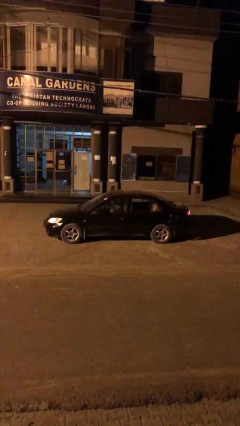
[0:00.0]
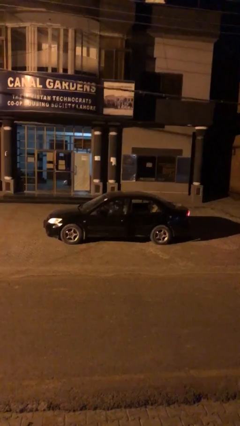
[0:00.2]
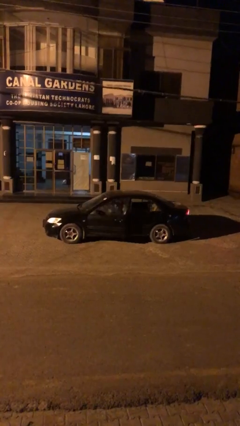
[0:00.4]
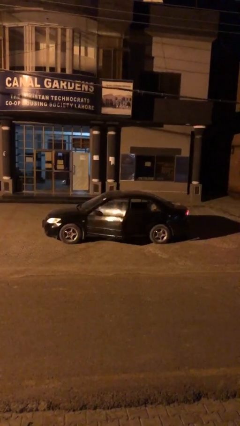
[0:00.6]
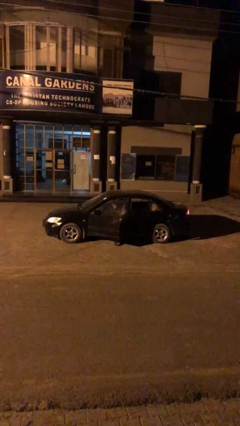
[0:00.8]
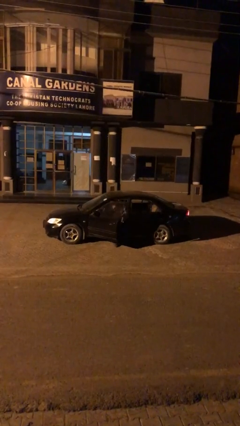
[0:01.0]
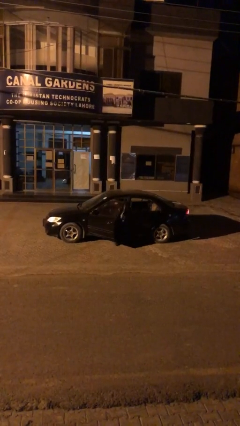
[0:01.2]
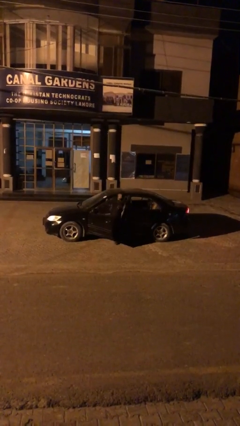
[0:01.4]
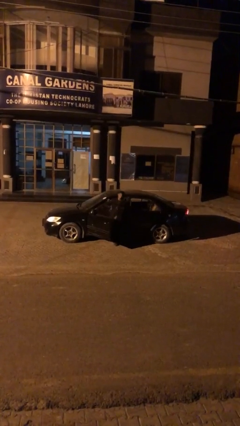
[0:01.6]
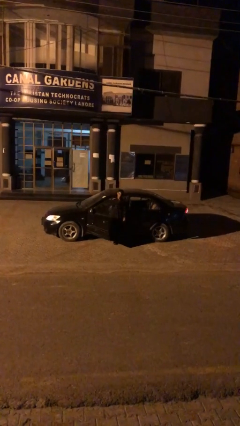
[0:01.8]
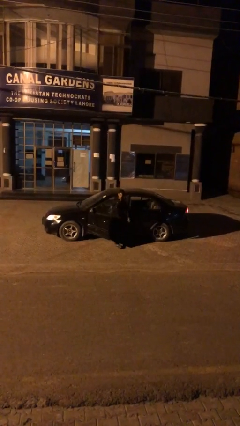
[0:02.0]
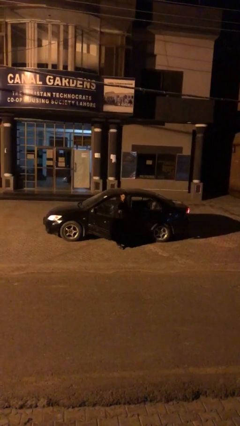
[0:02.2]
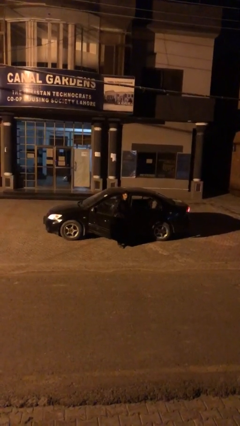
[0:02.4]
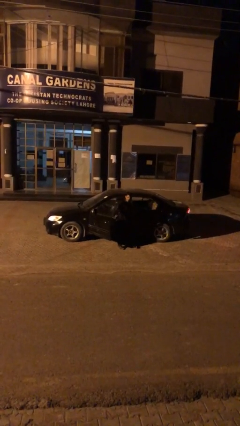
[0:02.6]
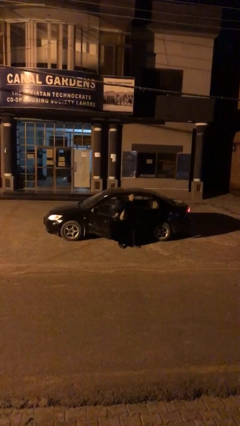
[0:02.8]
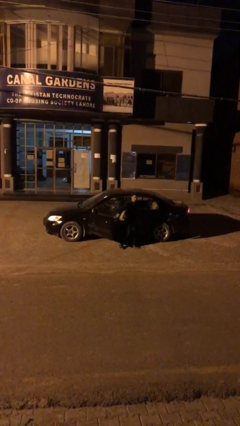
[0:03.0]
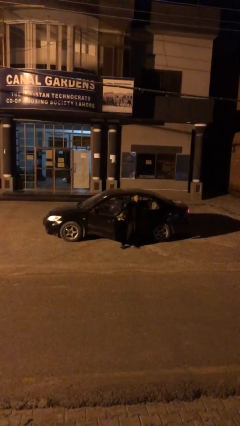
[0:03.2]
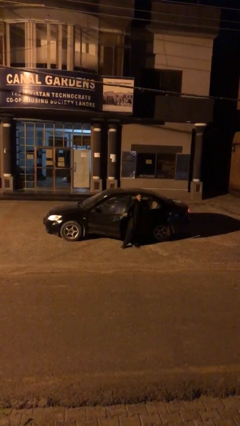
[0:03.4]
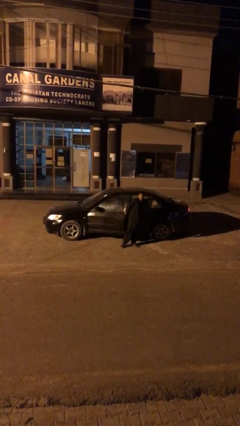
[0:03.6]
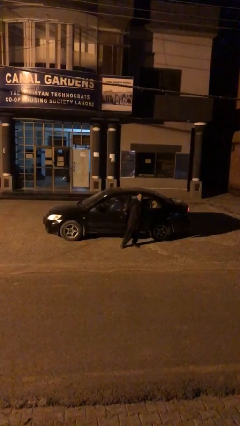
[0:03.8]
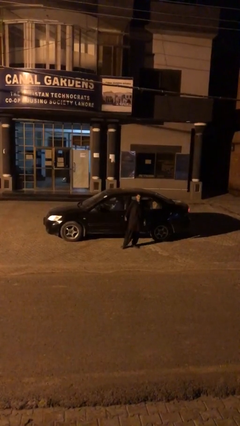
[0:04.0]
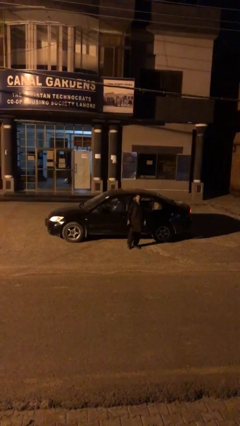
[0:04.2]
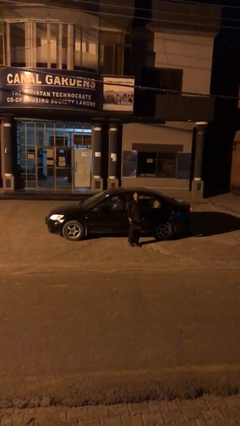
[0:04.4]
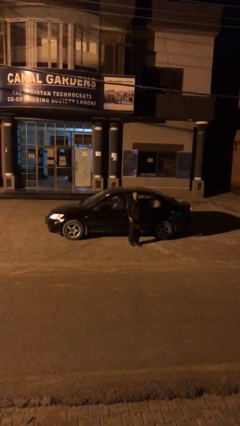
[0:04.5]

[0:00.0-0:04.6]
car drops off person

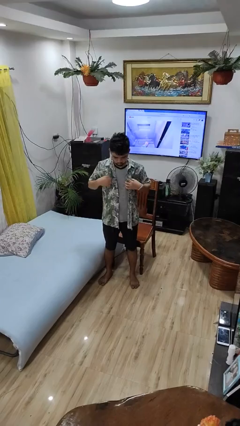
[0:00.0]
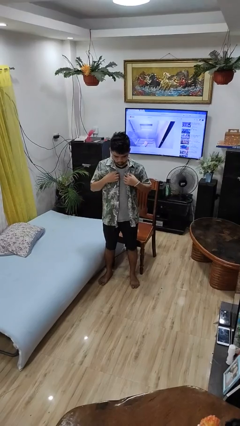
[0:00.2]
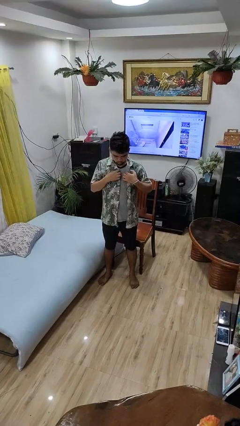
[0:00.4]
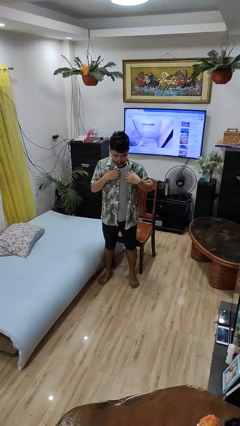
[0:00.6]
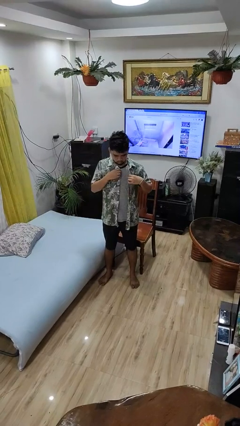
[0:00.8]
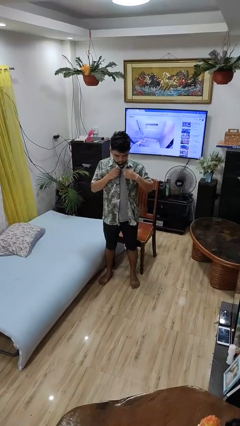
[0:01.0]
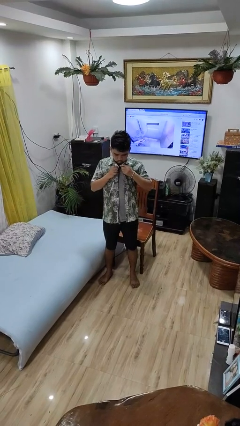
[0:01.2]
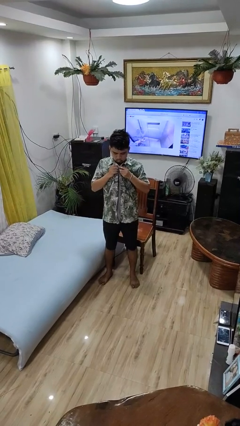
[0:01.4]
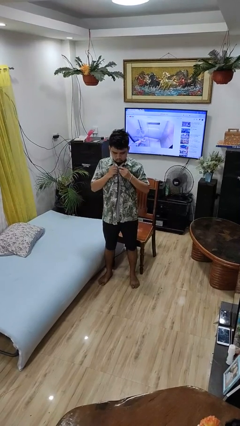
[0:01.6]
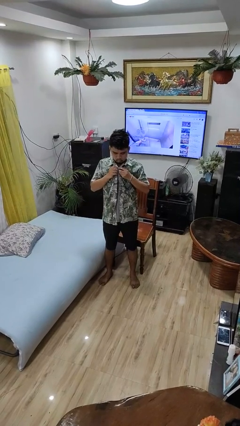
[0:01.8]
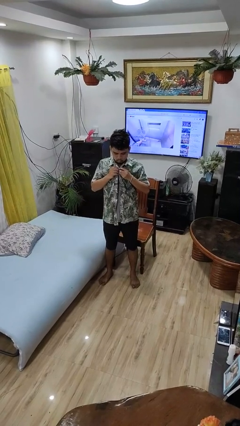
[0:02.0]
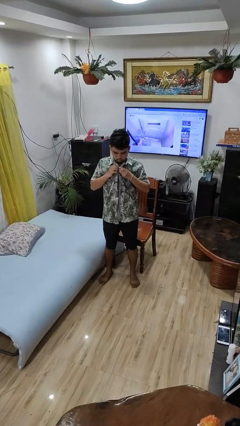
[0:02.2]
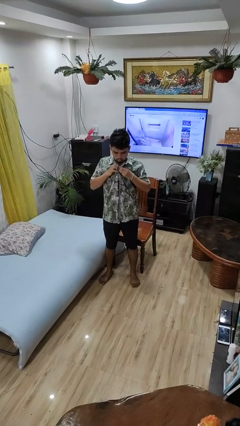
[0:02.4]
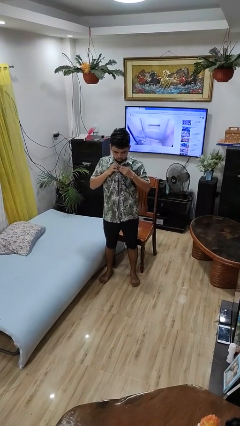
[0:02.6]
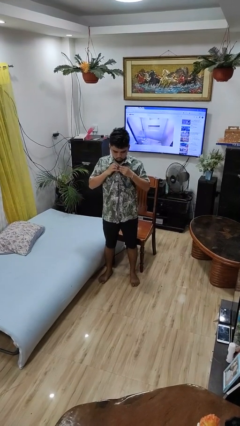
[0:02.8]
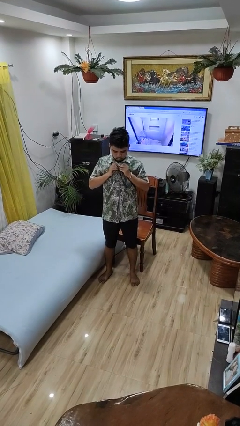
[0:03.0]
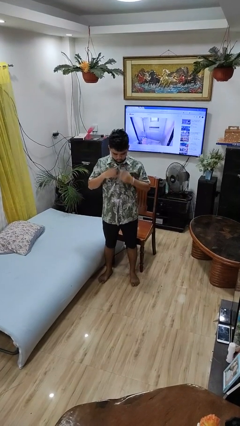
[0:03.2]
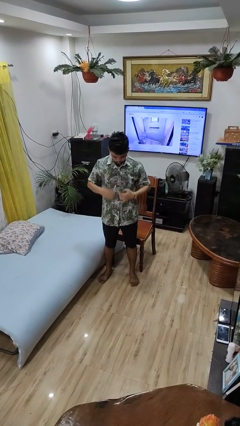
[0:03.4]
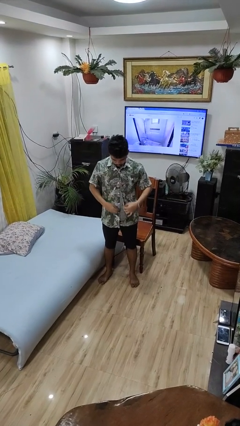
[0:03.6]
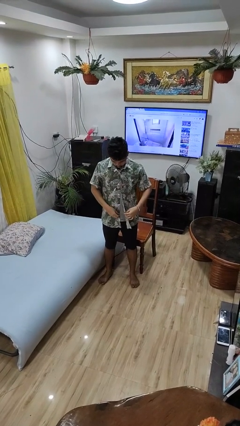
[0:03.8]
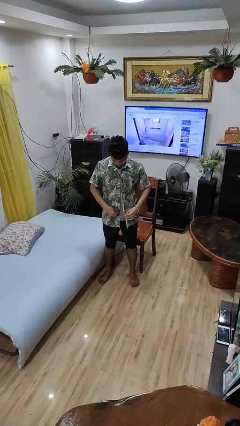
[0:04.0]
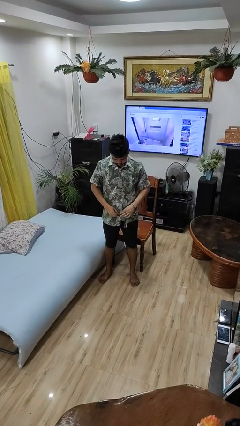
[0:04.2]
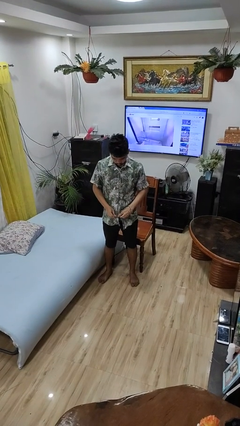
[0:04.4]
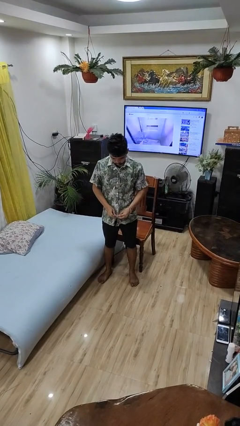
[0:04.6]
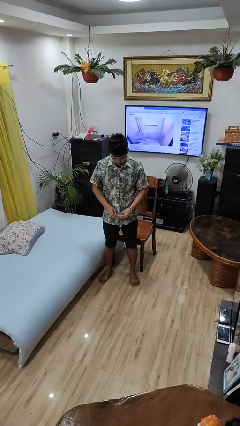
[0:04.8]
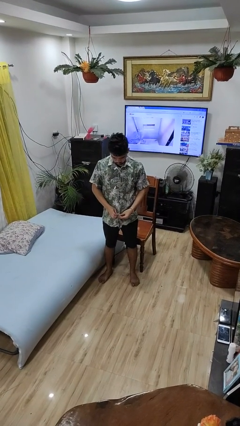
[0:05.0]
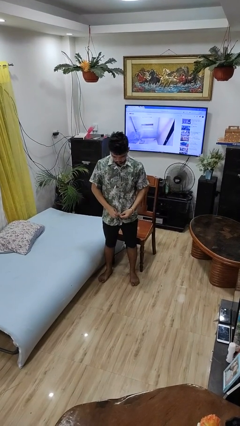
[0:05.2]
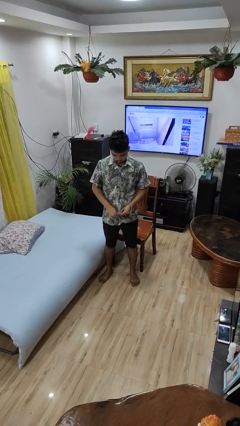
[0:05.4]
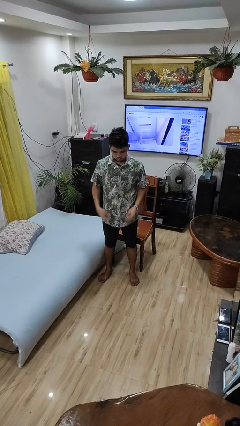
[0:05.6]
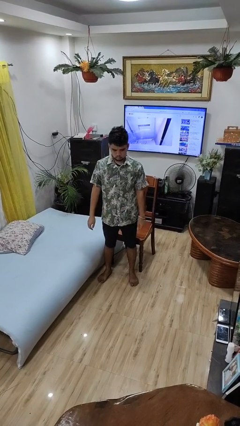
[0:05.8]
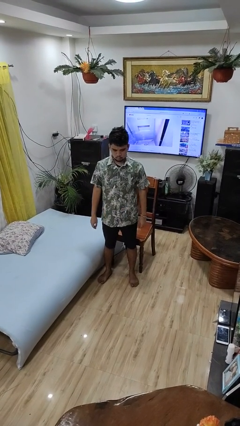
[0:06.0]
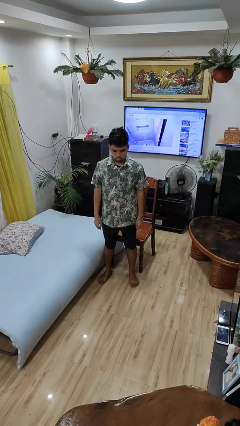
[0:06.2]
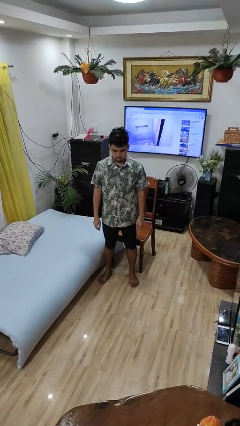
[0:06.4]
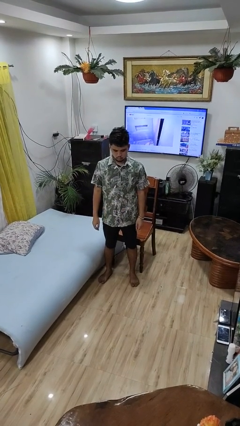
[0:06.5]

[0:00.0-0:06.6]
person buttons shirt

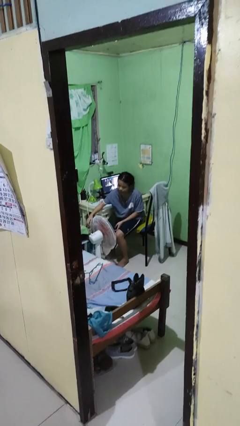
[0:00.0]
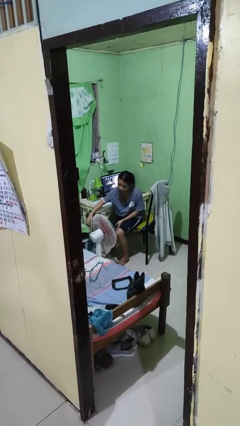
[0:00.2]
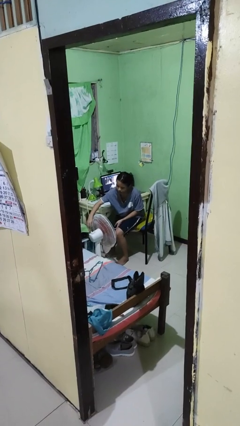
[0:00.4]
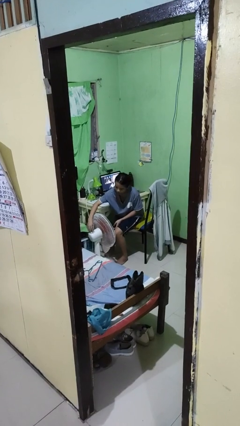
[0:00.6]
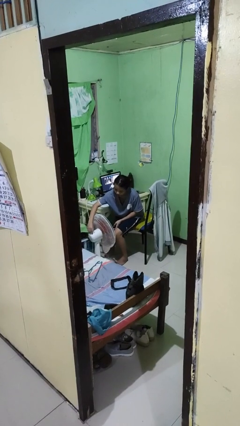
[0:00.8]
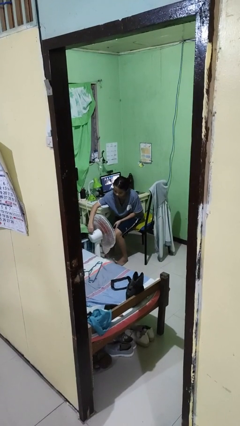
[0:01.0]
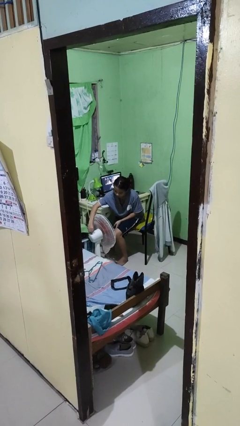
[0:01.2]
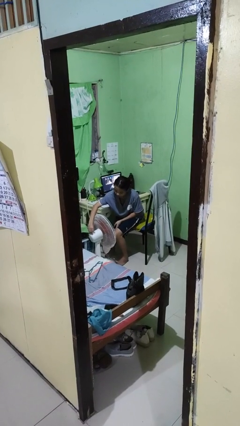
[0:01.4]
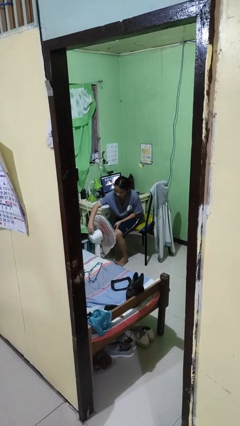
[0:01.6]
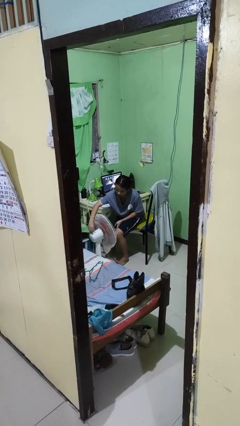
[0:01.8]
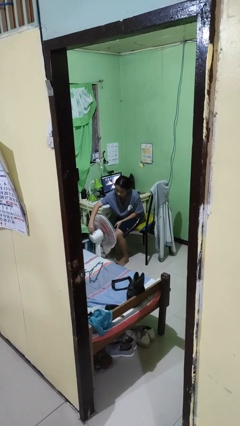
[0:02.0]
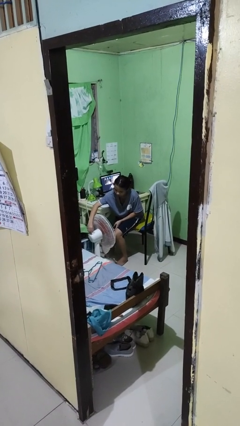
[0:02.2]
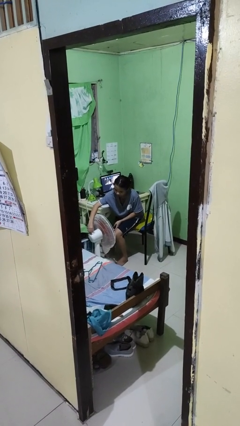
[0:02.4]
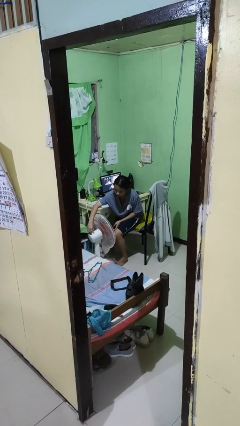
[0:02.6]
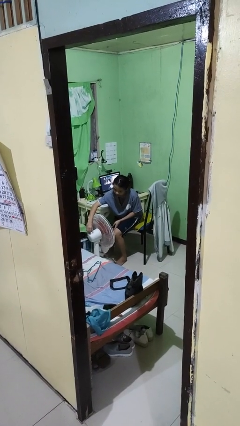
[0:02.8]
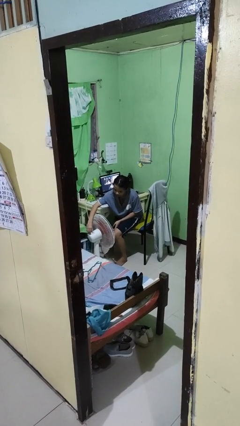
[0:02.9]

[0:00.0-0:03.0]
person turns on fan

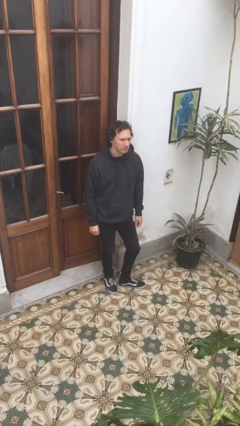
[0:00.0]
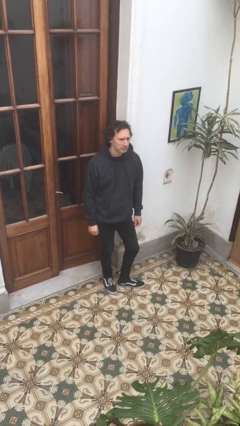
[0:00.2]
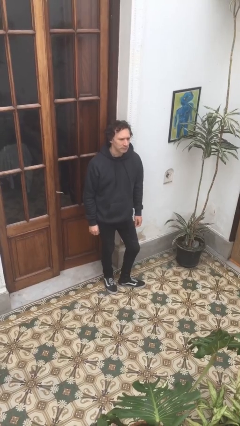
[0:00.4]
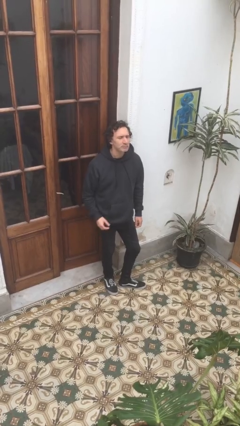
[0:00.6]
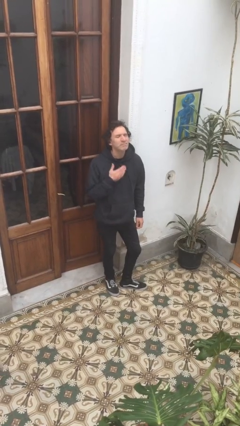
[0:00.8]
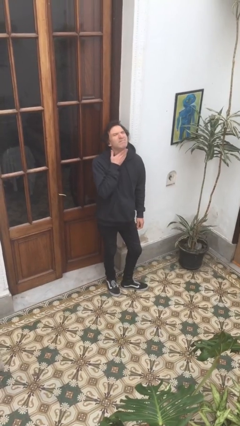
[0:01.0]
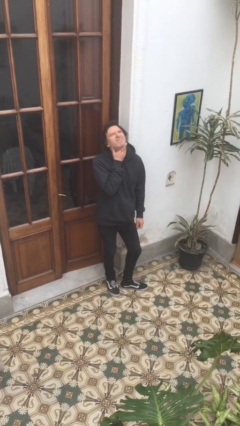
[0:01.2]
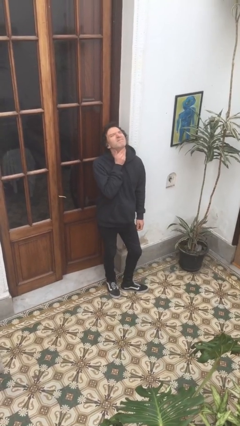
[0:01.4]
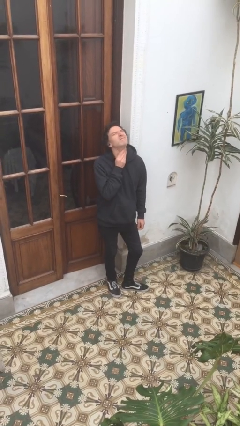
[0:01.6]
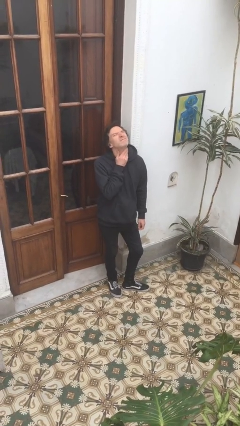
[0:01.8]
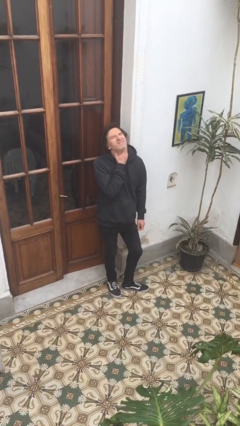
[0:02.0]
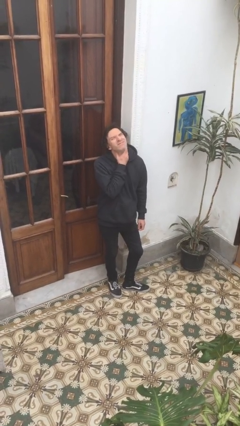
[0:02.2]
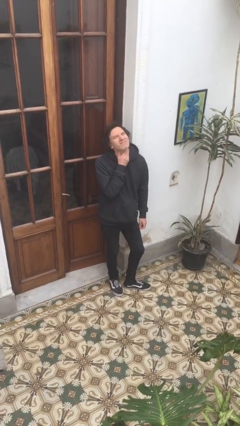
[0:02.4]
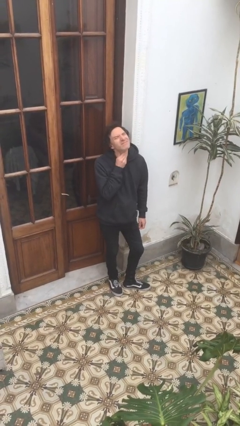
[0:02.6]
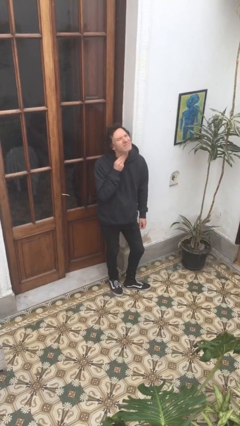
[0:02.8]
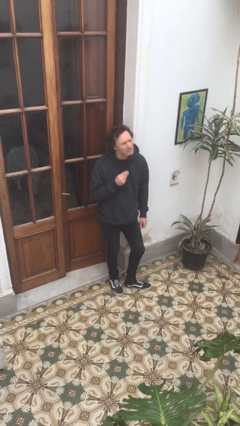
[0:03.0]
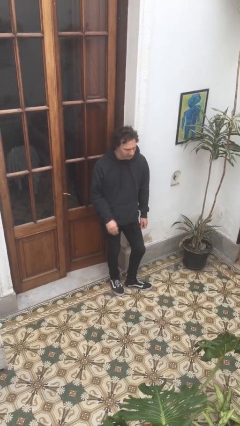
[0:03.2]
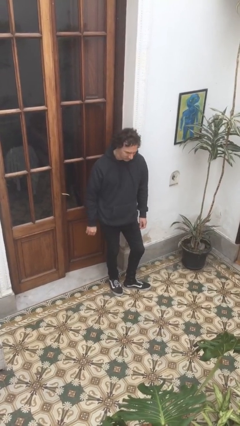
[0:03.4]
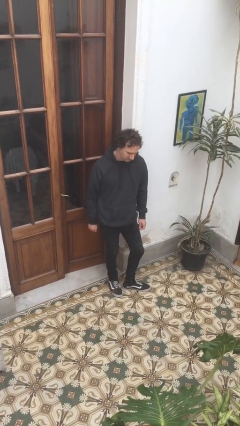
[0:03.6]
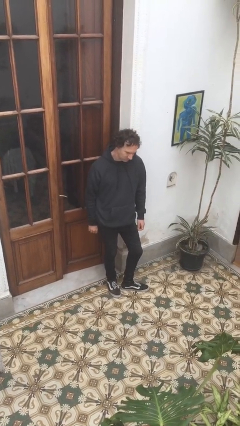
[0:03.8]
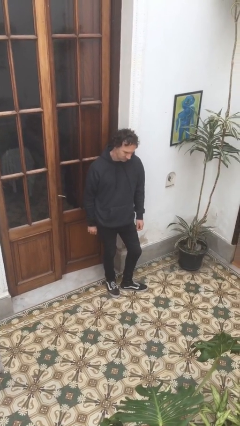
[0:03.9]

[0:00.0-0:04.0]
person rubs neck
